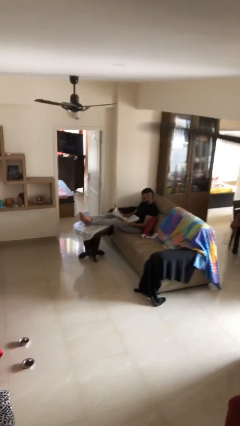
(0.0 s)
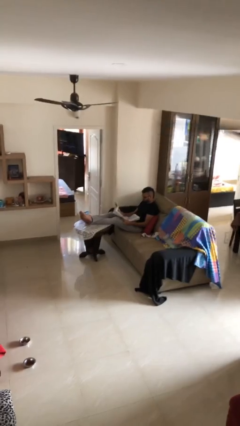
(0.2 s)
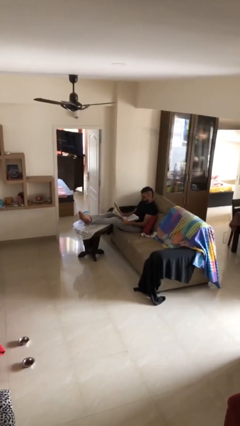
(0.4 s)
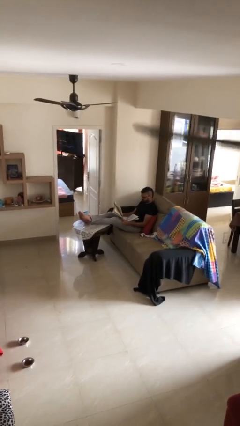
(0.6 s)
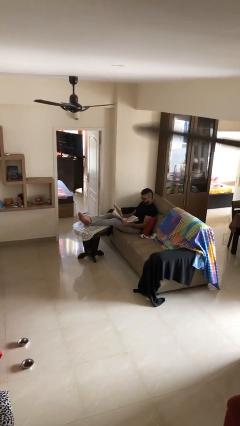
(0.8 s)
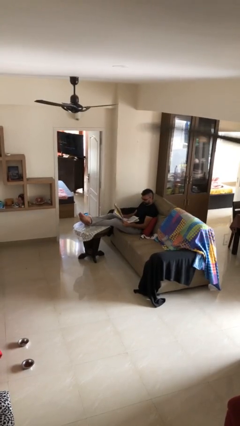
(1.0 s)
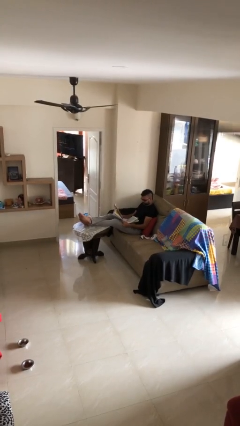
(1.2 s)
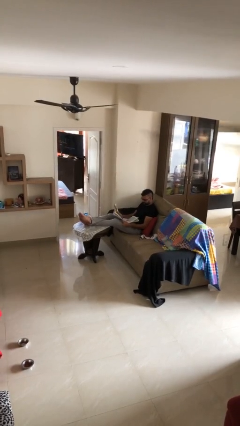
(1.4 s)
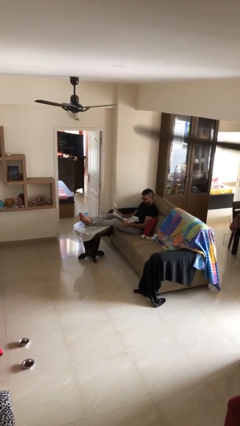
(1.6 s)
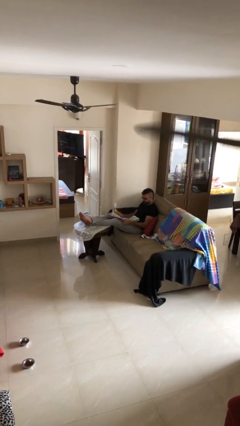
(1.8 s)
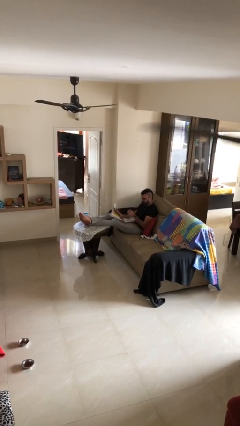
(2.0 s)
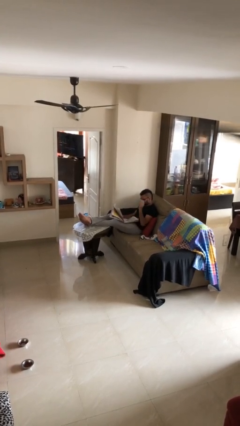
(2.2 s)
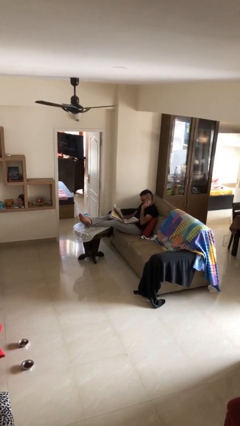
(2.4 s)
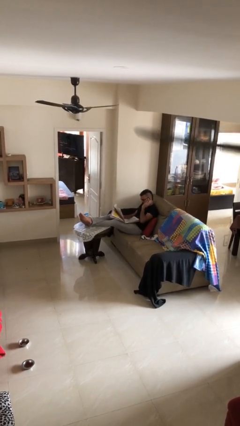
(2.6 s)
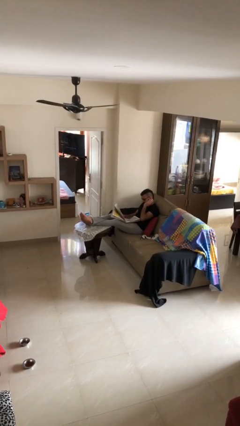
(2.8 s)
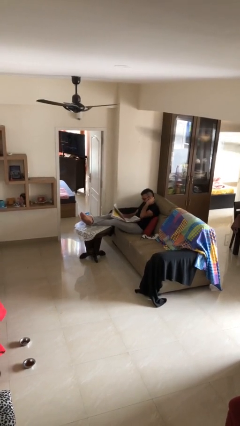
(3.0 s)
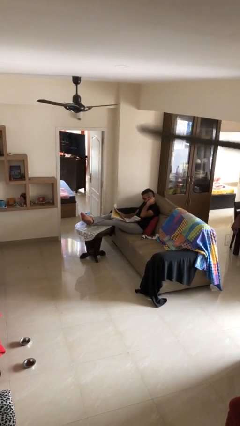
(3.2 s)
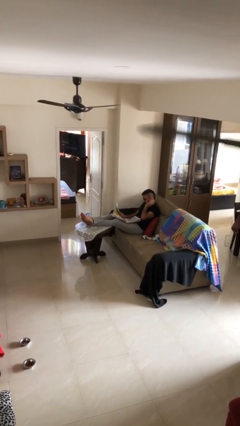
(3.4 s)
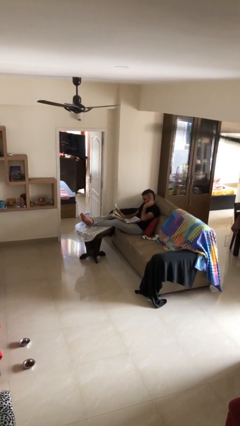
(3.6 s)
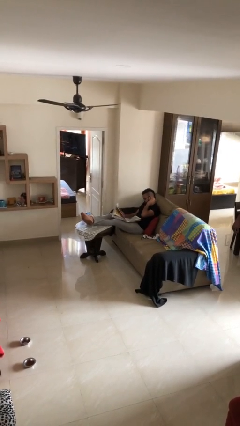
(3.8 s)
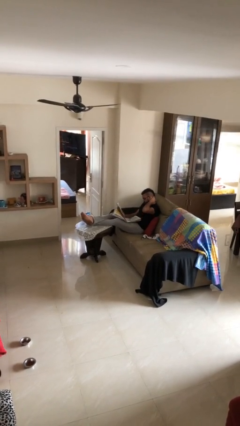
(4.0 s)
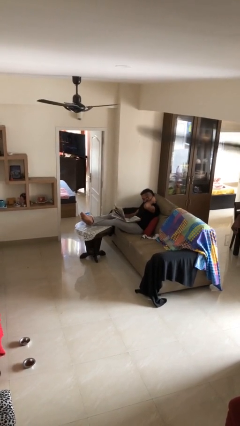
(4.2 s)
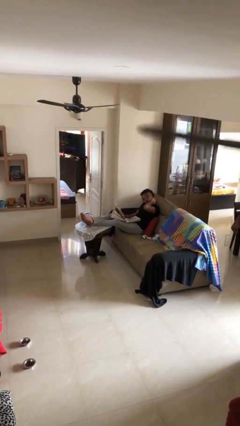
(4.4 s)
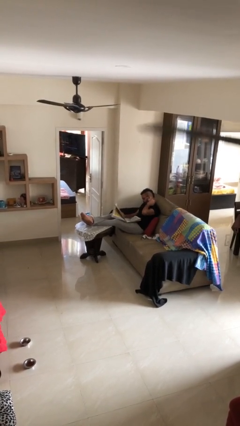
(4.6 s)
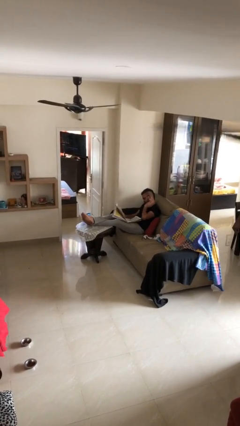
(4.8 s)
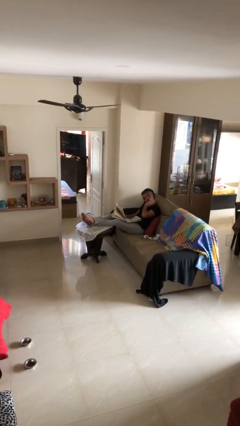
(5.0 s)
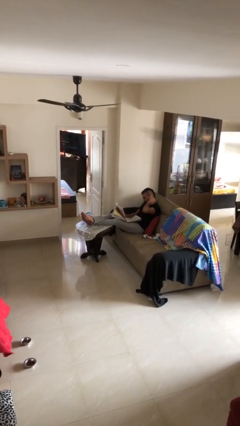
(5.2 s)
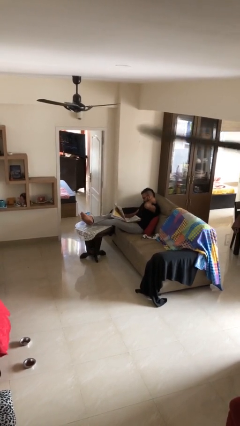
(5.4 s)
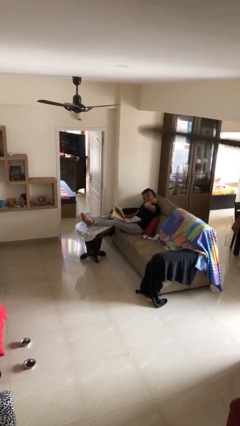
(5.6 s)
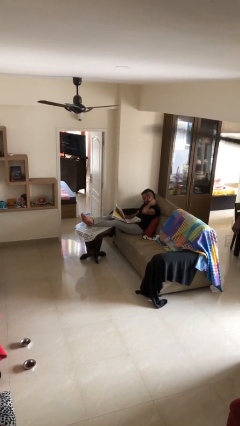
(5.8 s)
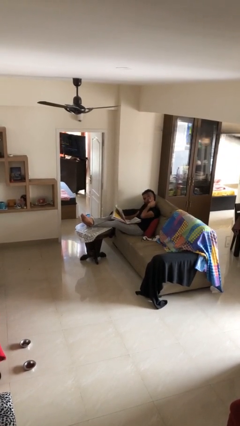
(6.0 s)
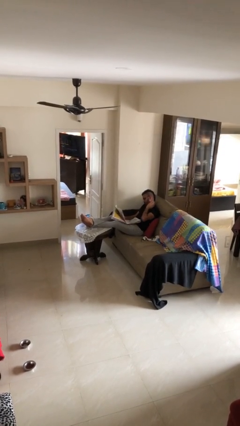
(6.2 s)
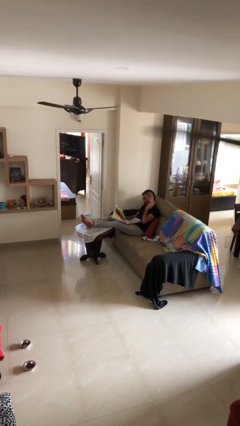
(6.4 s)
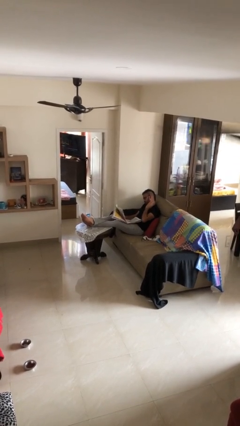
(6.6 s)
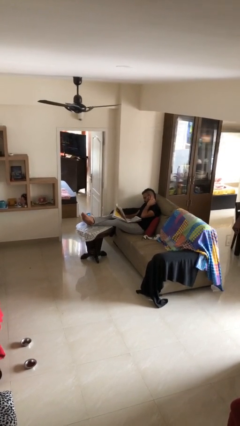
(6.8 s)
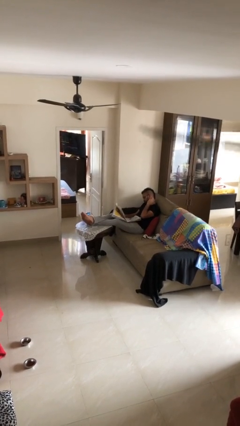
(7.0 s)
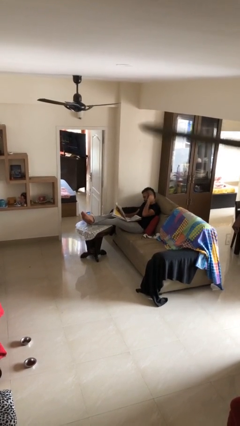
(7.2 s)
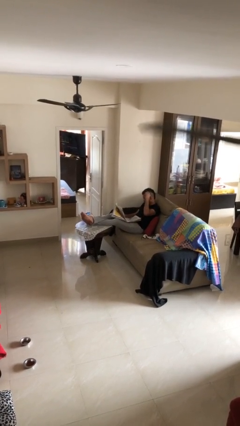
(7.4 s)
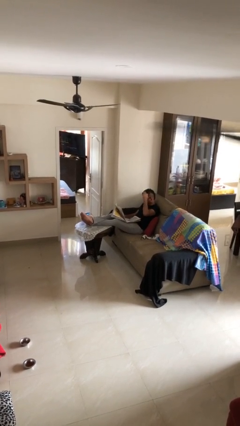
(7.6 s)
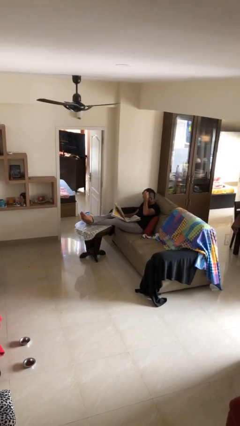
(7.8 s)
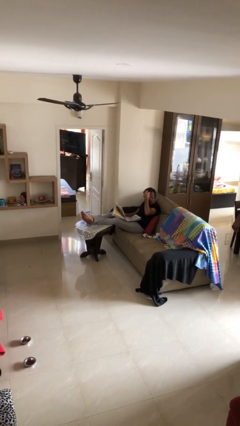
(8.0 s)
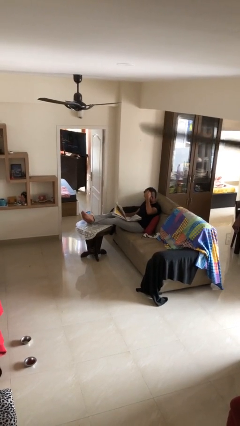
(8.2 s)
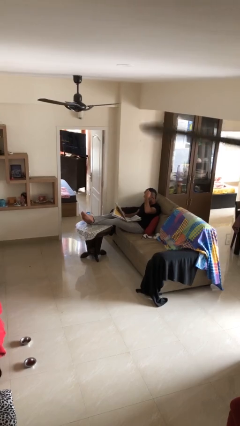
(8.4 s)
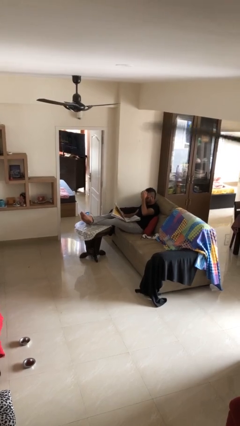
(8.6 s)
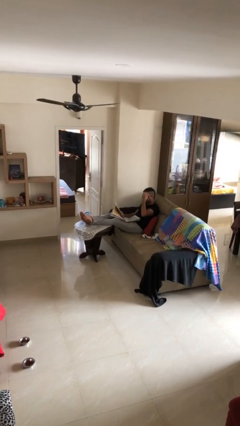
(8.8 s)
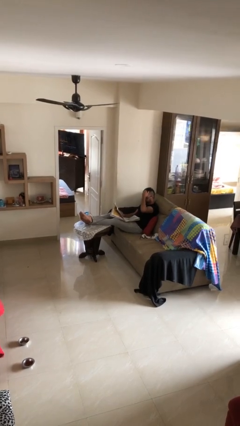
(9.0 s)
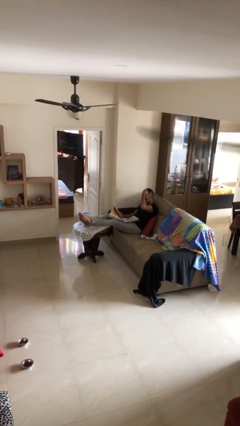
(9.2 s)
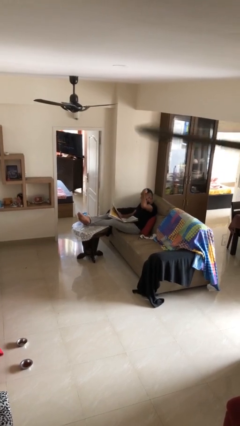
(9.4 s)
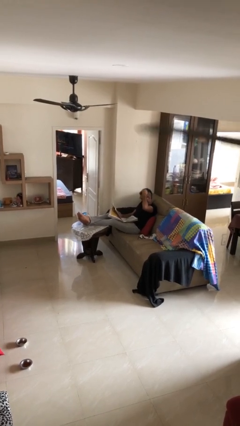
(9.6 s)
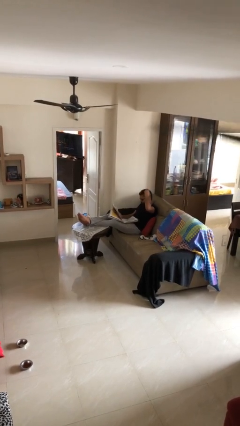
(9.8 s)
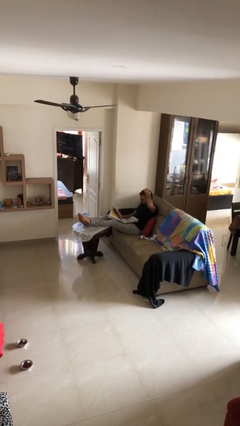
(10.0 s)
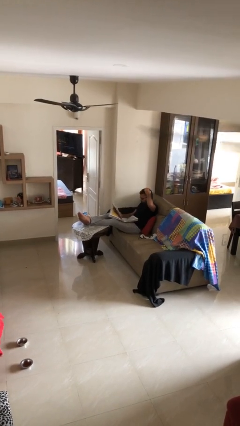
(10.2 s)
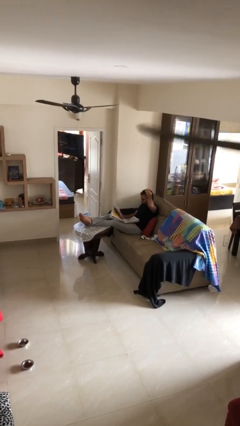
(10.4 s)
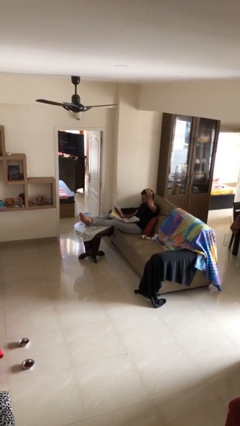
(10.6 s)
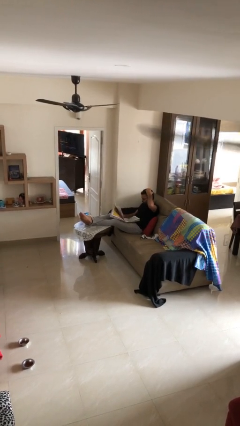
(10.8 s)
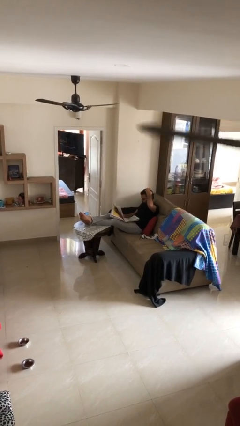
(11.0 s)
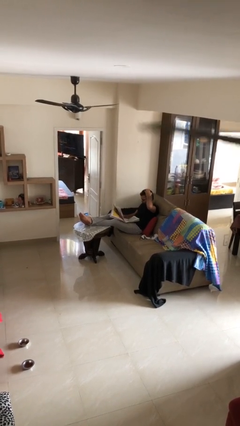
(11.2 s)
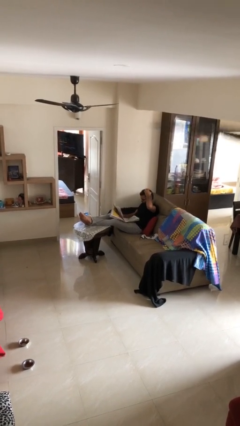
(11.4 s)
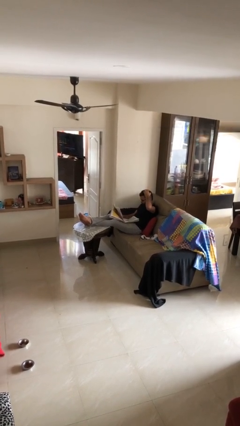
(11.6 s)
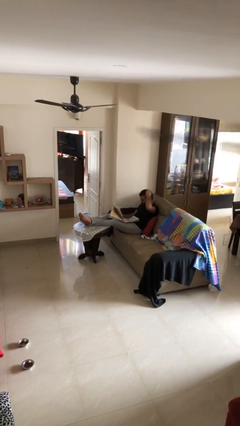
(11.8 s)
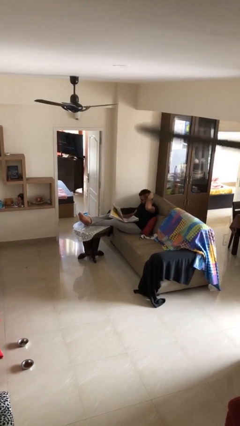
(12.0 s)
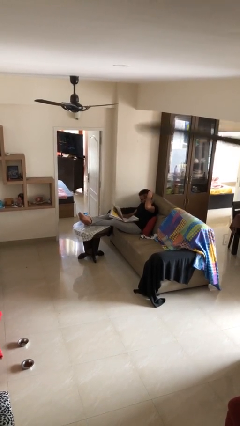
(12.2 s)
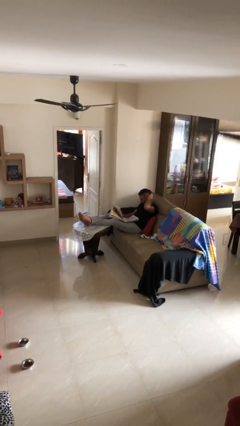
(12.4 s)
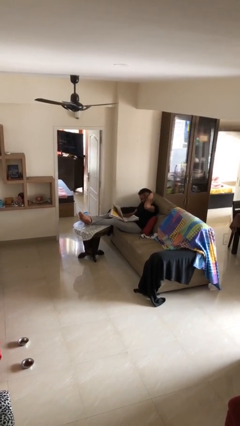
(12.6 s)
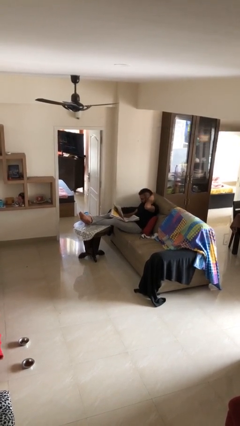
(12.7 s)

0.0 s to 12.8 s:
person reads document

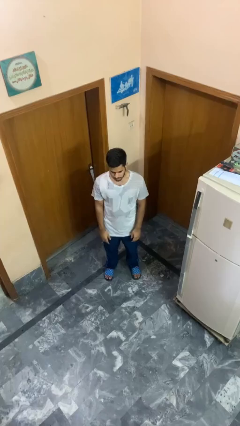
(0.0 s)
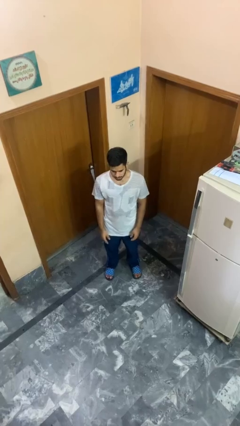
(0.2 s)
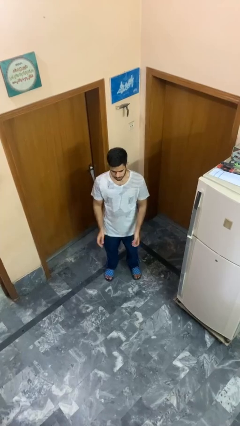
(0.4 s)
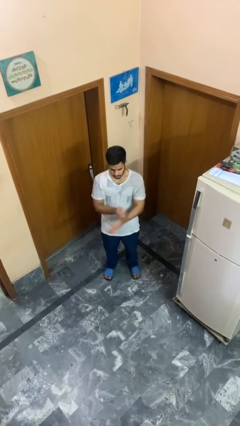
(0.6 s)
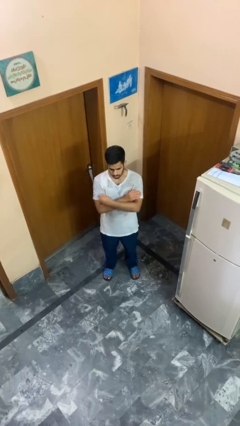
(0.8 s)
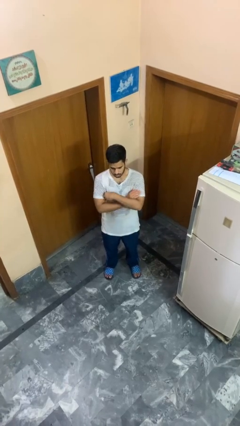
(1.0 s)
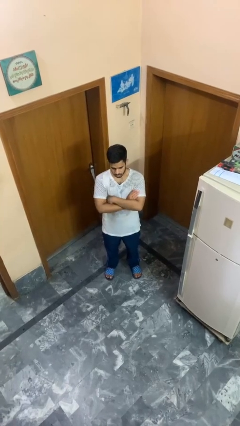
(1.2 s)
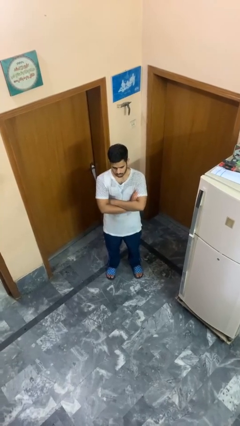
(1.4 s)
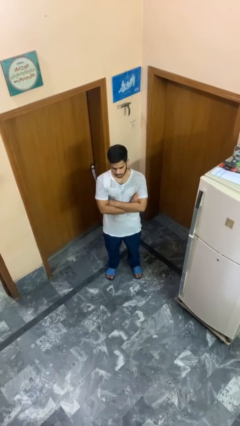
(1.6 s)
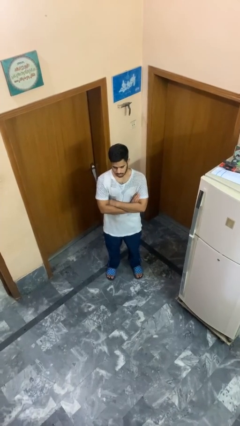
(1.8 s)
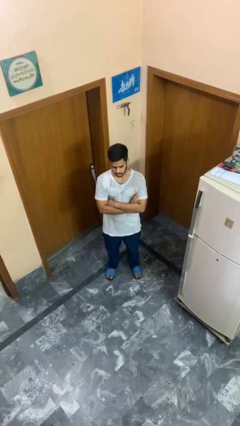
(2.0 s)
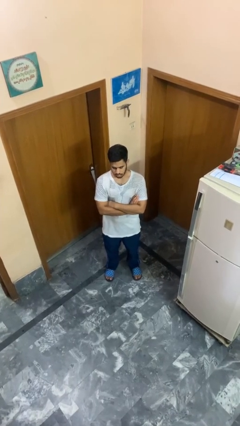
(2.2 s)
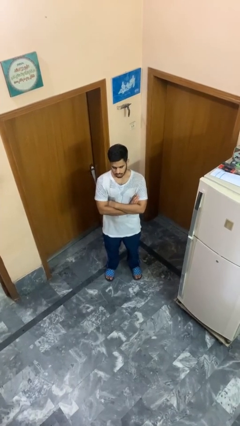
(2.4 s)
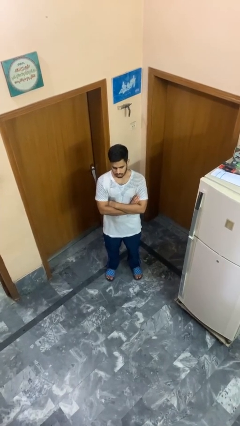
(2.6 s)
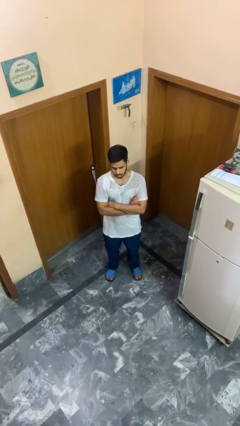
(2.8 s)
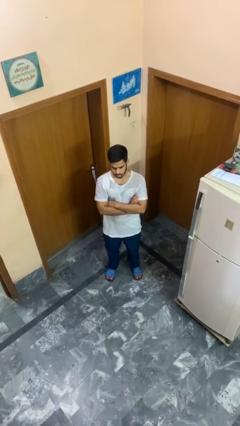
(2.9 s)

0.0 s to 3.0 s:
person crosses arms

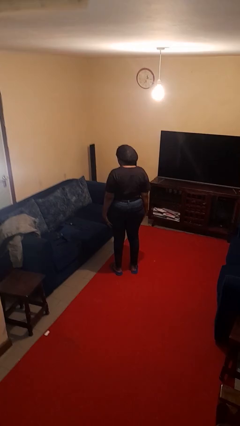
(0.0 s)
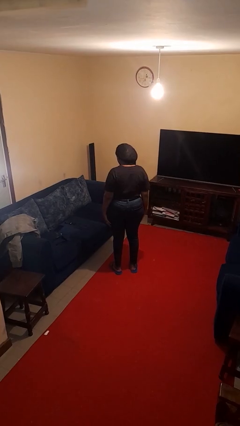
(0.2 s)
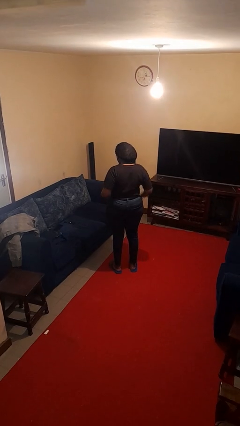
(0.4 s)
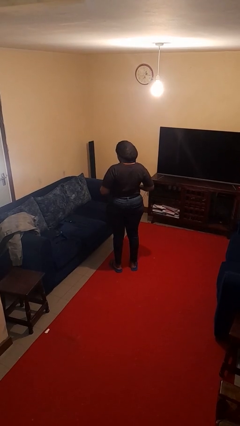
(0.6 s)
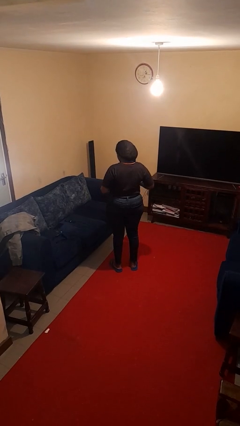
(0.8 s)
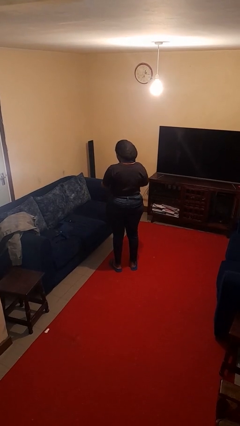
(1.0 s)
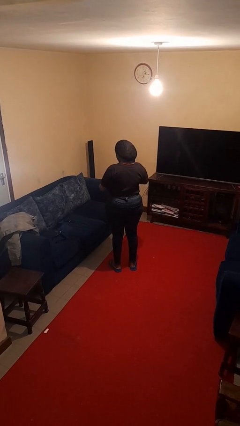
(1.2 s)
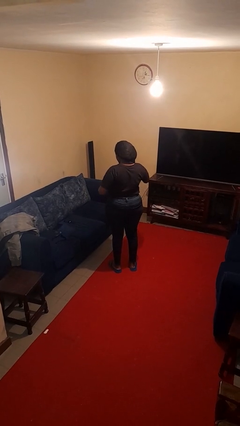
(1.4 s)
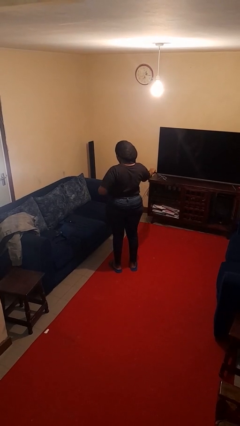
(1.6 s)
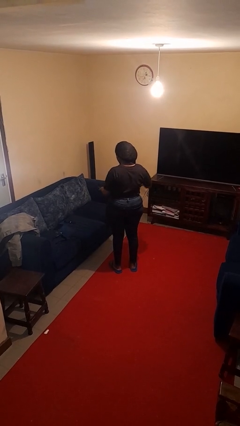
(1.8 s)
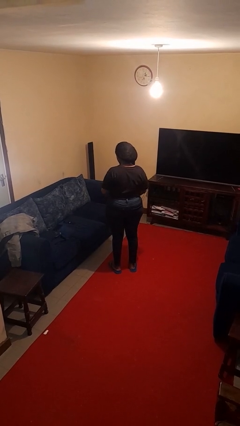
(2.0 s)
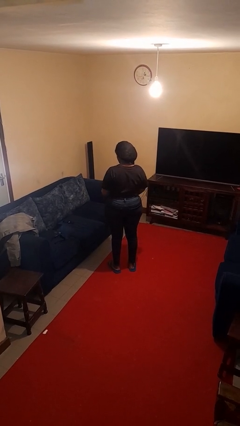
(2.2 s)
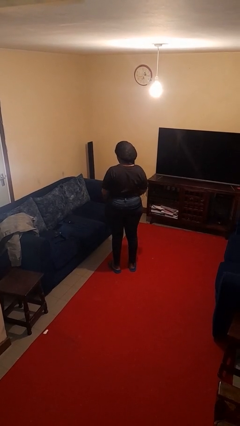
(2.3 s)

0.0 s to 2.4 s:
person takes off belt
